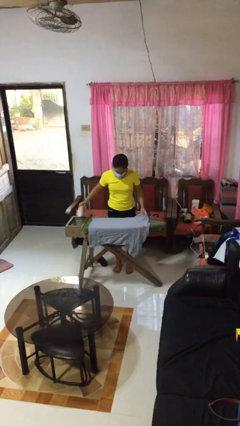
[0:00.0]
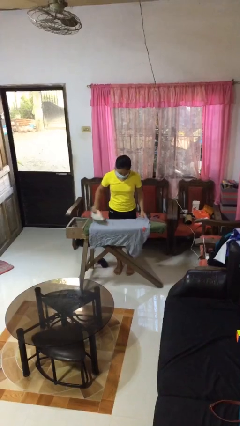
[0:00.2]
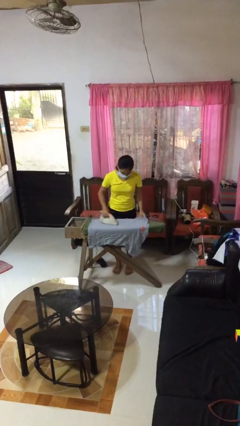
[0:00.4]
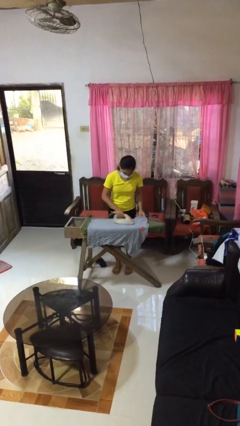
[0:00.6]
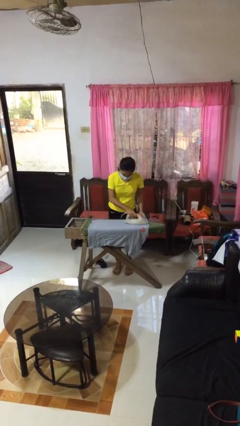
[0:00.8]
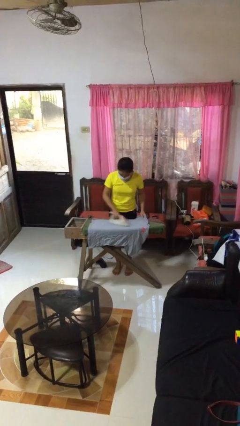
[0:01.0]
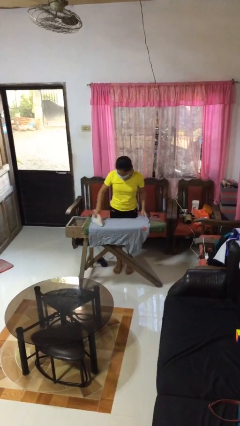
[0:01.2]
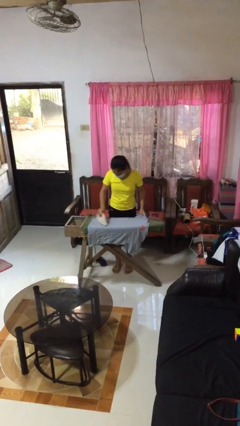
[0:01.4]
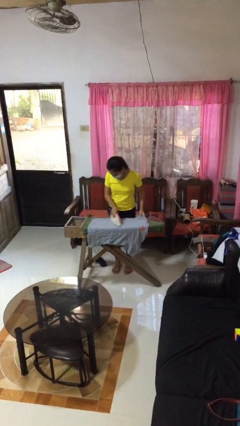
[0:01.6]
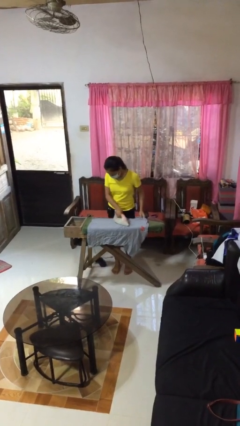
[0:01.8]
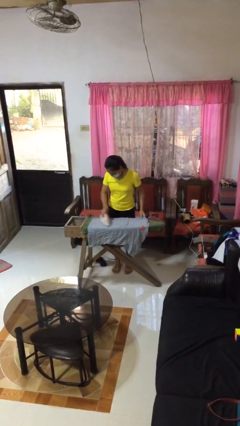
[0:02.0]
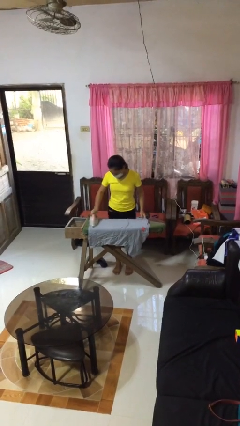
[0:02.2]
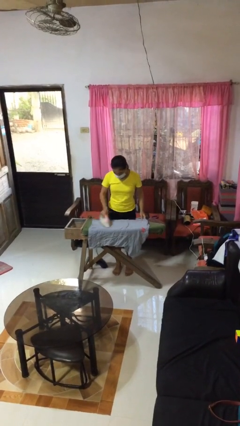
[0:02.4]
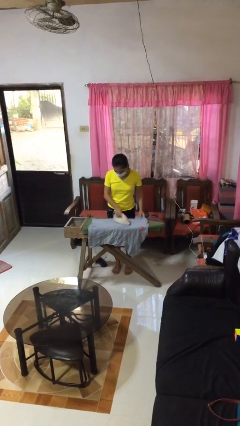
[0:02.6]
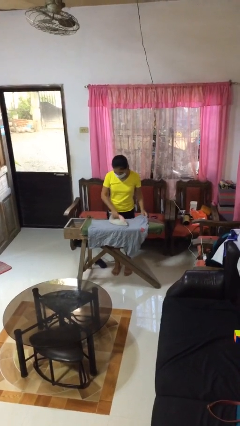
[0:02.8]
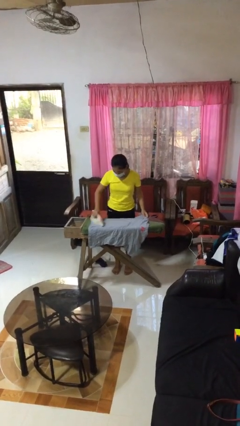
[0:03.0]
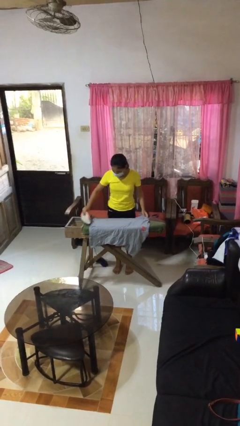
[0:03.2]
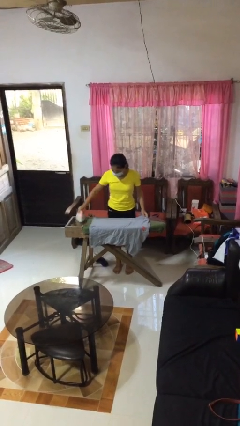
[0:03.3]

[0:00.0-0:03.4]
person irons clothes

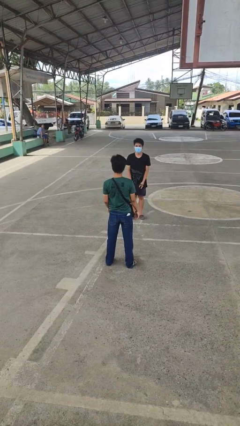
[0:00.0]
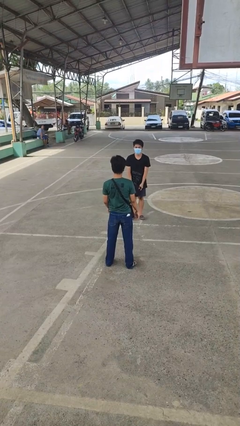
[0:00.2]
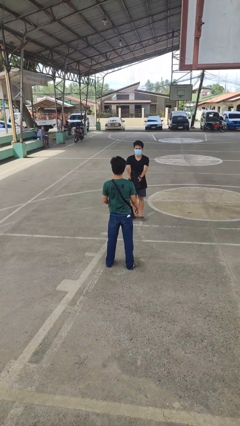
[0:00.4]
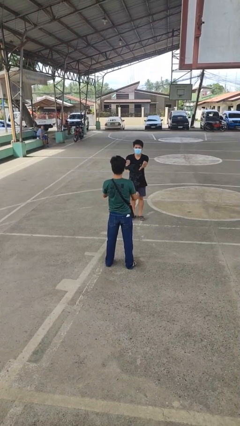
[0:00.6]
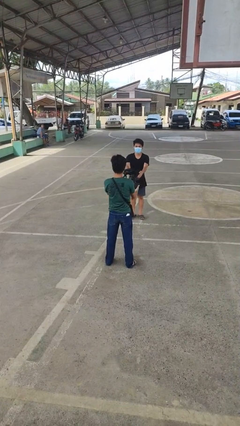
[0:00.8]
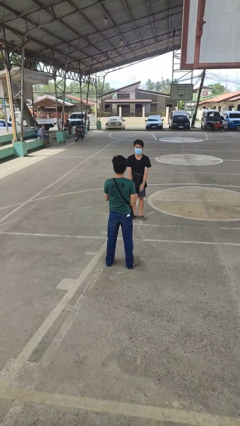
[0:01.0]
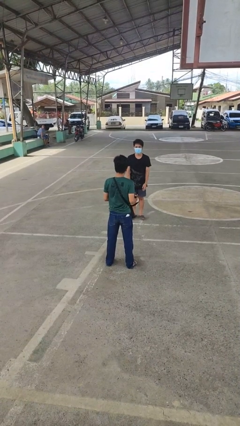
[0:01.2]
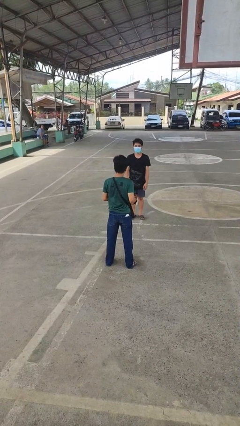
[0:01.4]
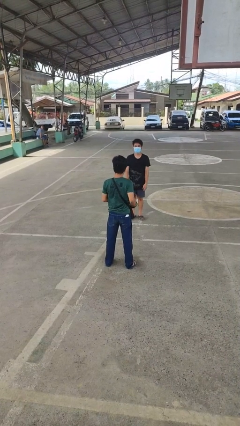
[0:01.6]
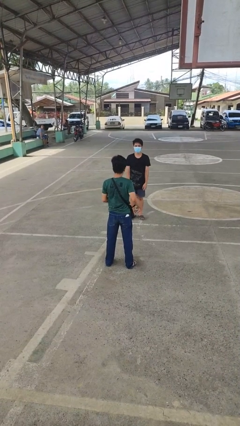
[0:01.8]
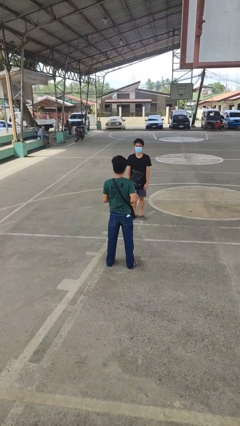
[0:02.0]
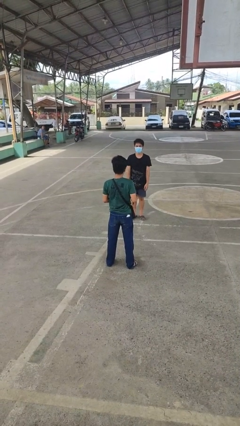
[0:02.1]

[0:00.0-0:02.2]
person catches object from person

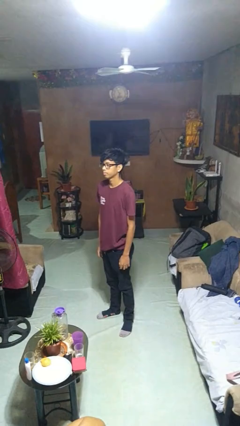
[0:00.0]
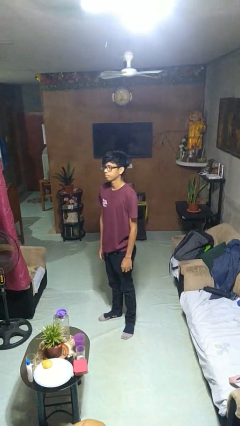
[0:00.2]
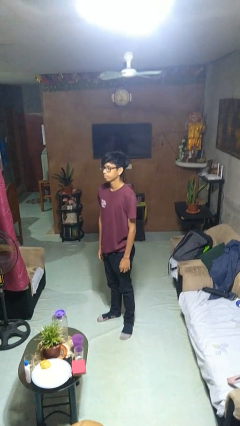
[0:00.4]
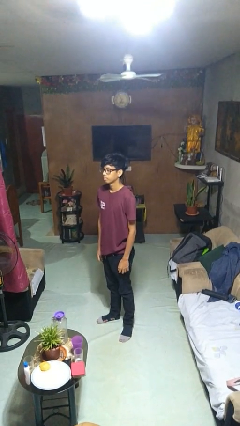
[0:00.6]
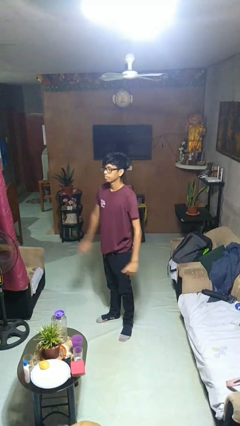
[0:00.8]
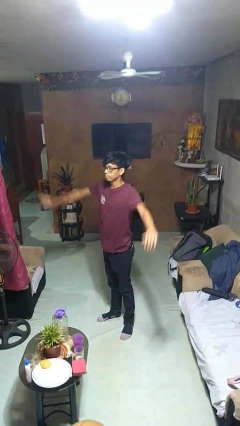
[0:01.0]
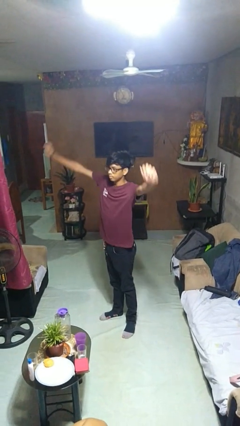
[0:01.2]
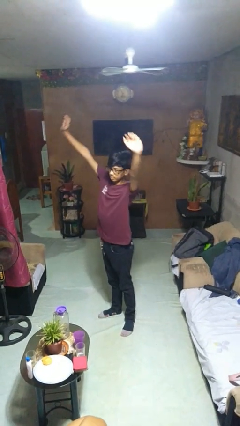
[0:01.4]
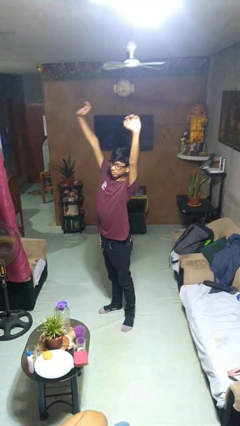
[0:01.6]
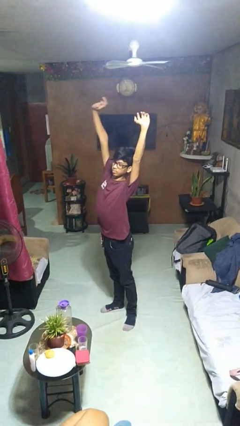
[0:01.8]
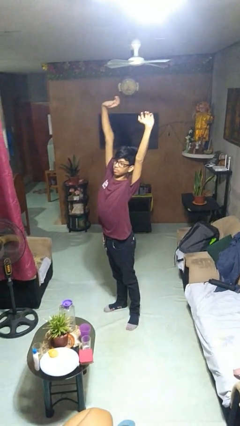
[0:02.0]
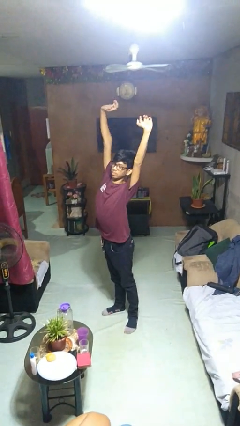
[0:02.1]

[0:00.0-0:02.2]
person stretches arms over head

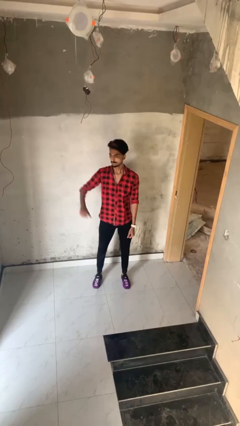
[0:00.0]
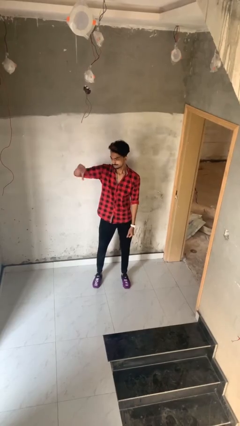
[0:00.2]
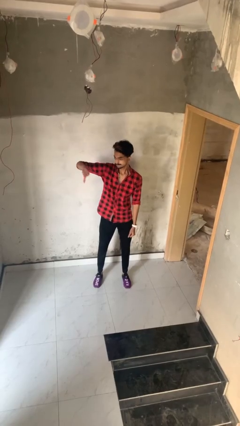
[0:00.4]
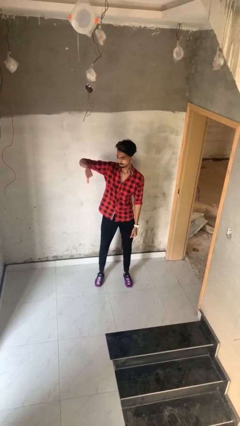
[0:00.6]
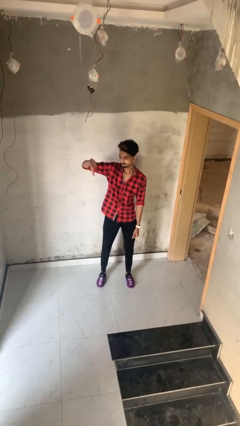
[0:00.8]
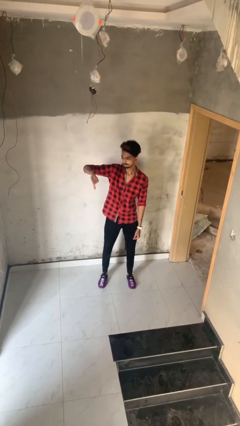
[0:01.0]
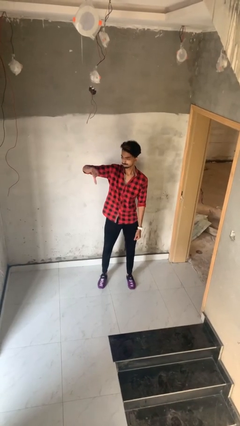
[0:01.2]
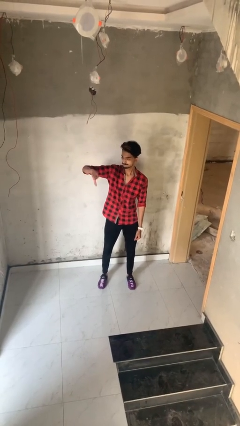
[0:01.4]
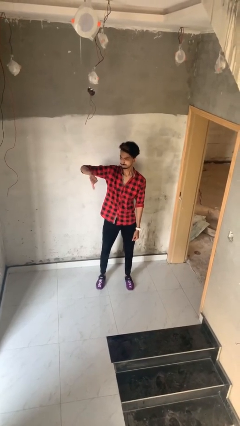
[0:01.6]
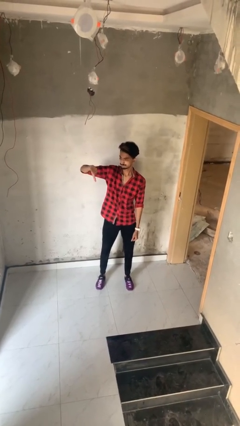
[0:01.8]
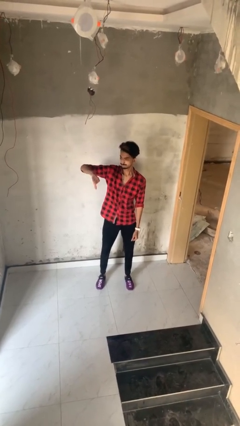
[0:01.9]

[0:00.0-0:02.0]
person gestures thumbs down

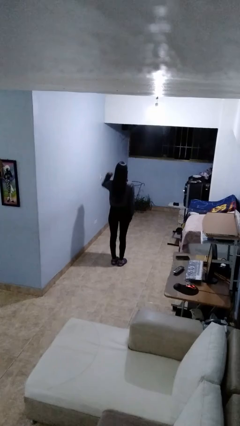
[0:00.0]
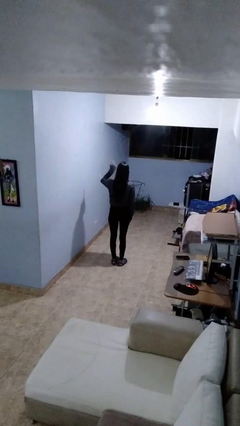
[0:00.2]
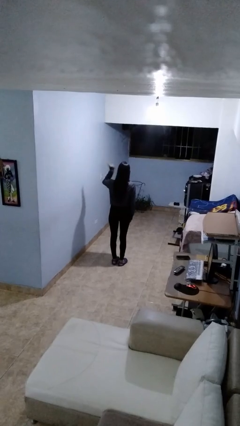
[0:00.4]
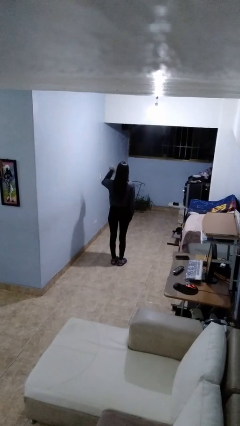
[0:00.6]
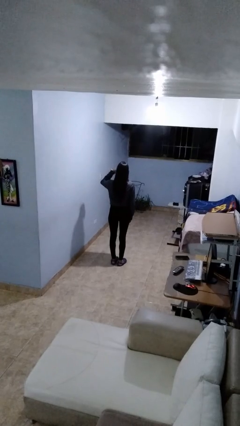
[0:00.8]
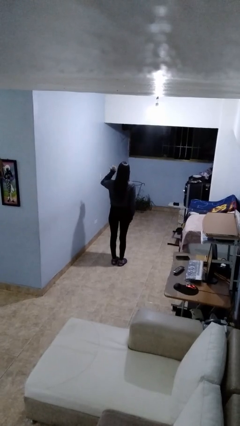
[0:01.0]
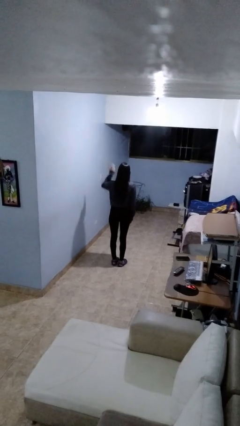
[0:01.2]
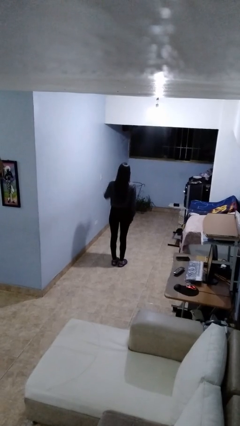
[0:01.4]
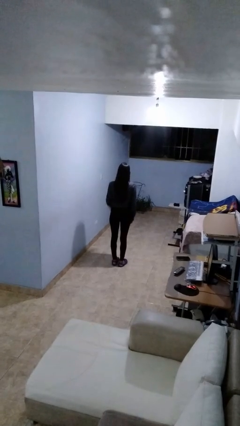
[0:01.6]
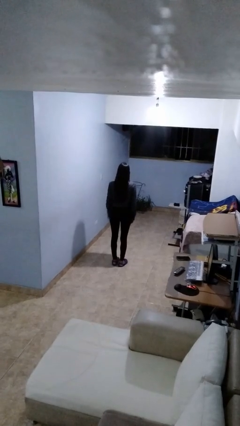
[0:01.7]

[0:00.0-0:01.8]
person salutes

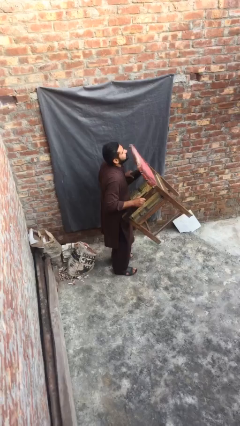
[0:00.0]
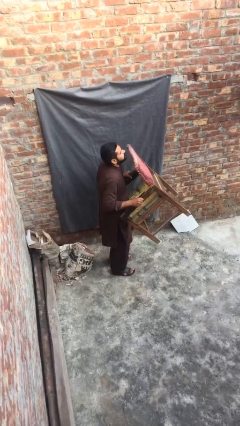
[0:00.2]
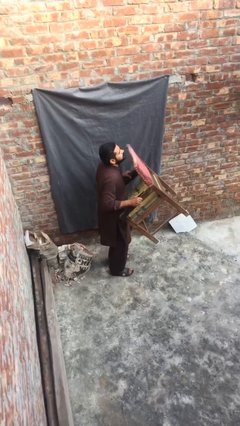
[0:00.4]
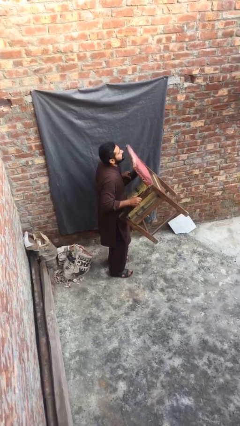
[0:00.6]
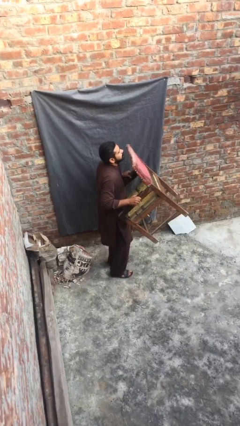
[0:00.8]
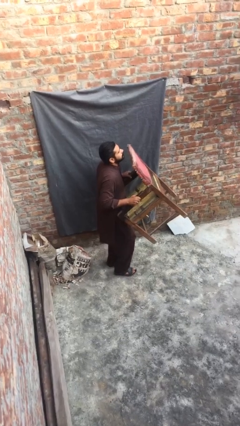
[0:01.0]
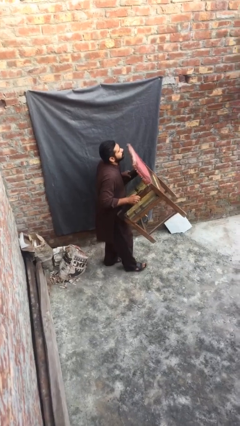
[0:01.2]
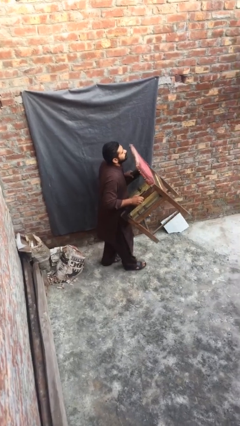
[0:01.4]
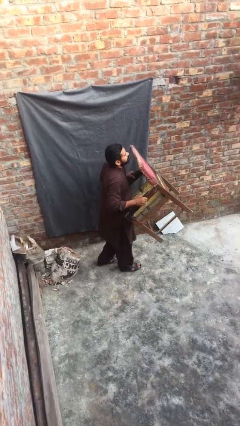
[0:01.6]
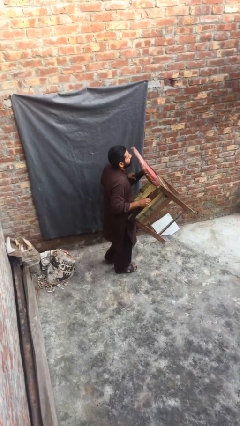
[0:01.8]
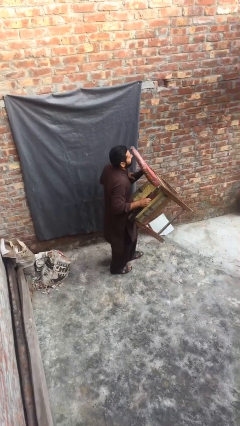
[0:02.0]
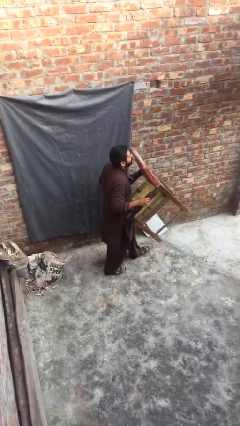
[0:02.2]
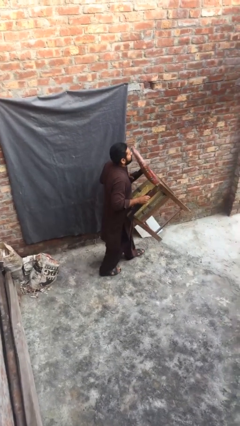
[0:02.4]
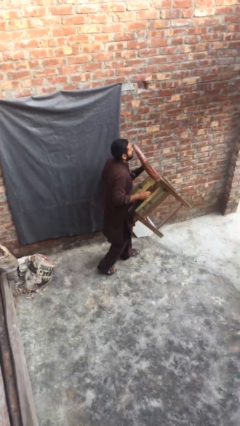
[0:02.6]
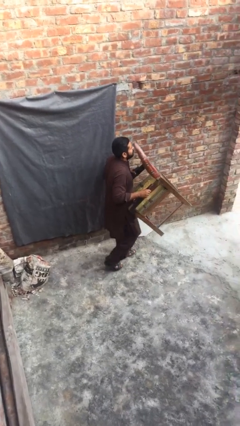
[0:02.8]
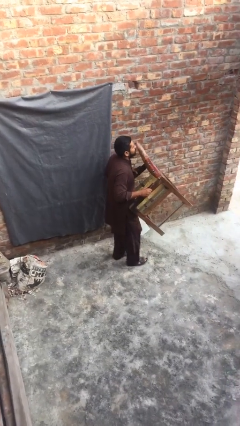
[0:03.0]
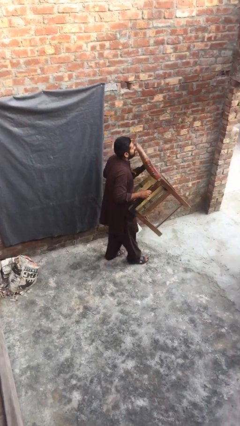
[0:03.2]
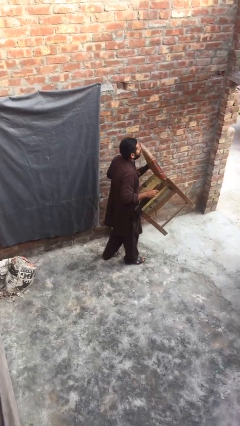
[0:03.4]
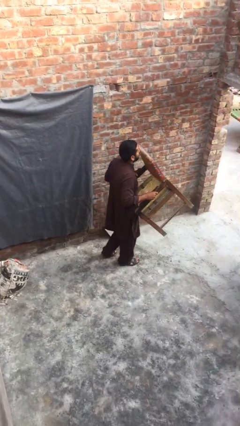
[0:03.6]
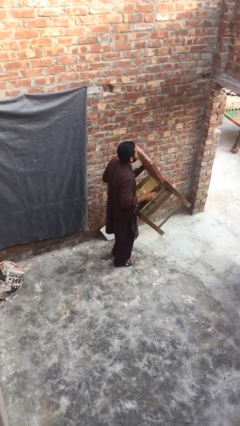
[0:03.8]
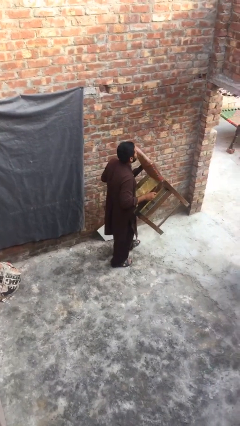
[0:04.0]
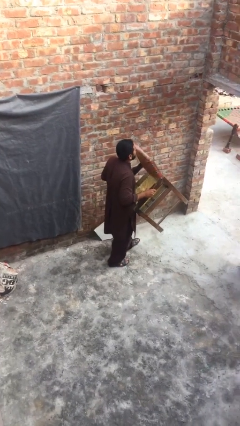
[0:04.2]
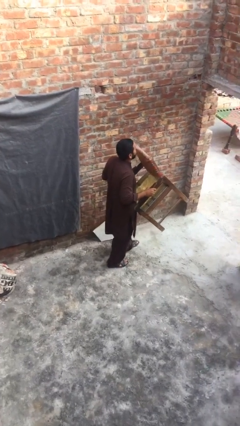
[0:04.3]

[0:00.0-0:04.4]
person carries heavy object

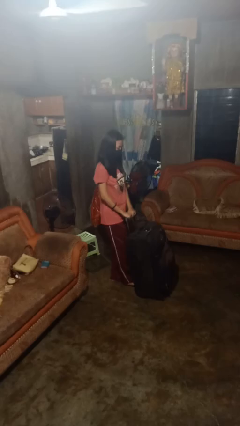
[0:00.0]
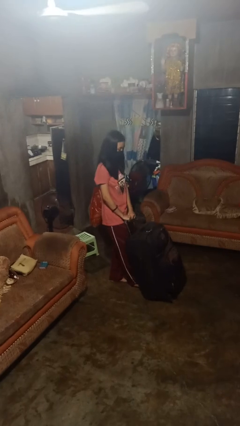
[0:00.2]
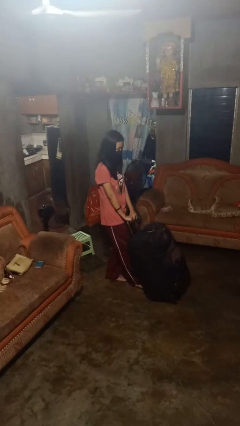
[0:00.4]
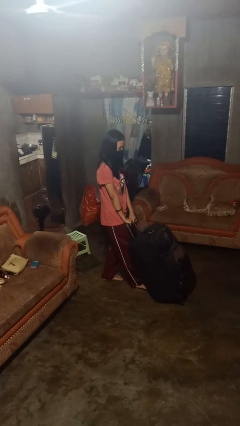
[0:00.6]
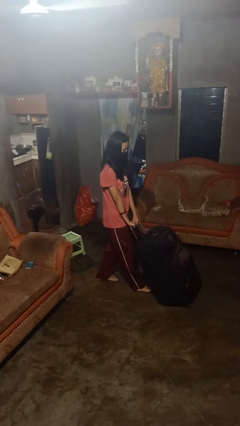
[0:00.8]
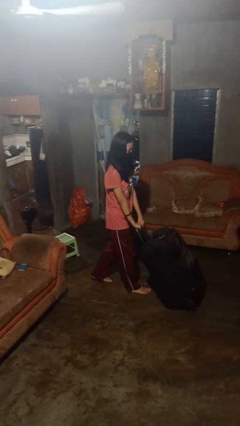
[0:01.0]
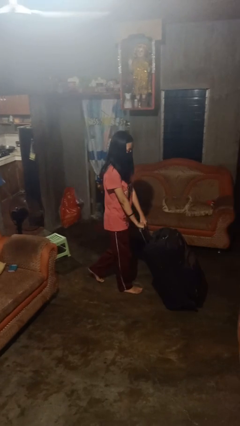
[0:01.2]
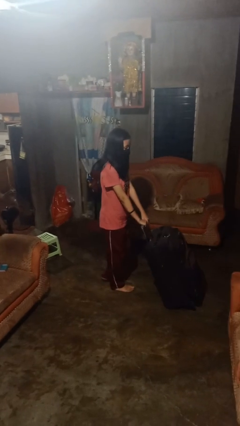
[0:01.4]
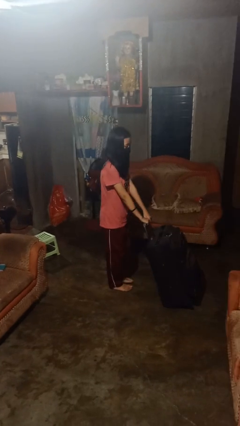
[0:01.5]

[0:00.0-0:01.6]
person pushes wheeled cart
